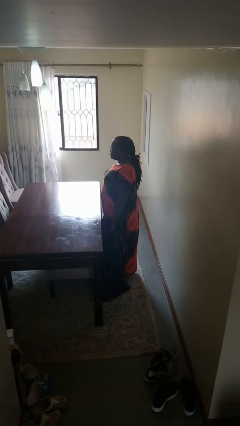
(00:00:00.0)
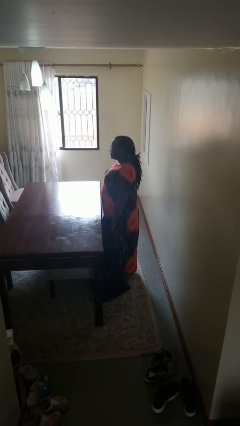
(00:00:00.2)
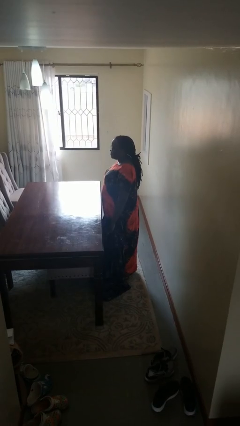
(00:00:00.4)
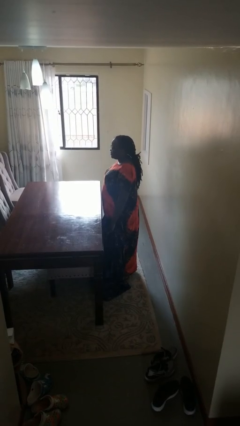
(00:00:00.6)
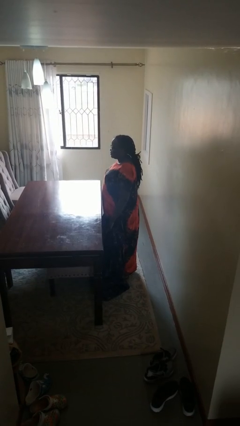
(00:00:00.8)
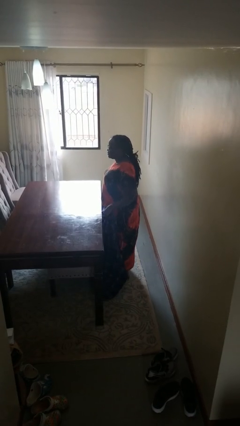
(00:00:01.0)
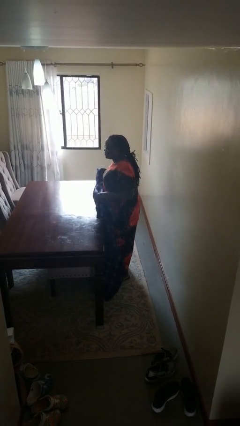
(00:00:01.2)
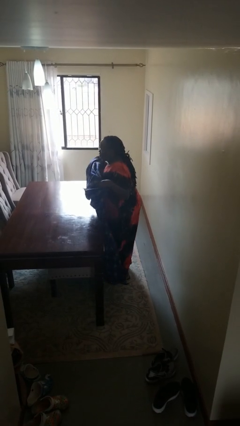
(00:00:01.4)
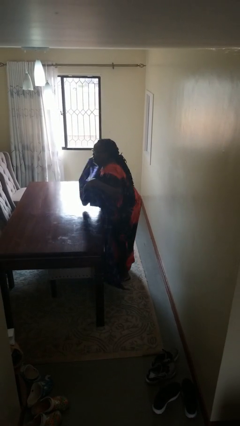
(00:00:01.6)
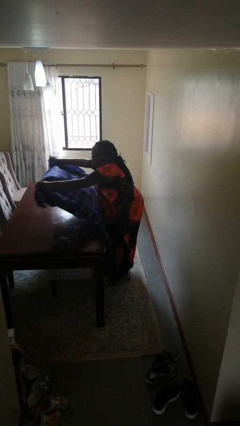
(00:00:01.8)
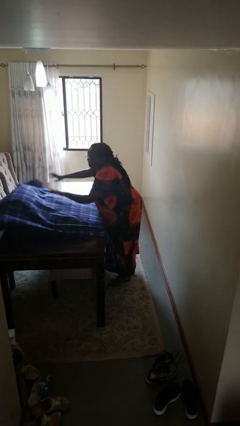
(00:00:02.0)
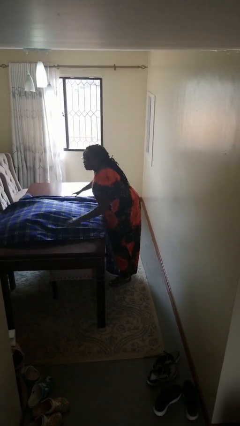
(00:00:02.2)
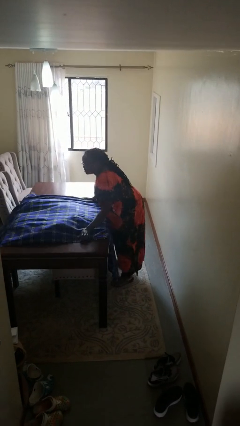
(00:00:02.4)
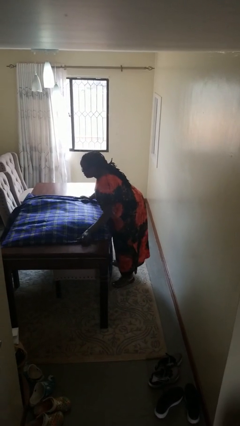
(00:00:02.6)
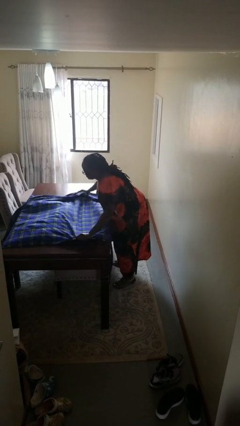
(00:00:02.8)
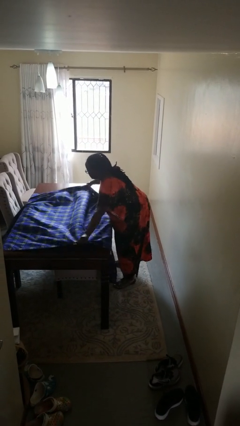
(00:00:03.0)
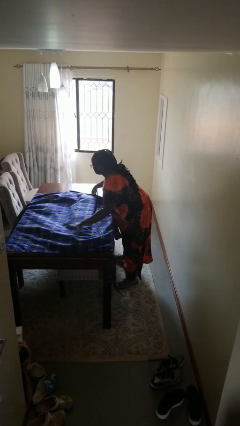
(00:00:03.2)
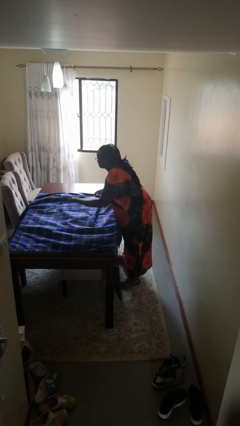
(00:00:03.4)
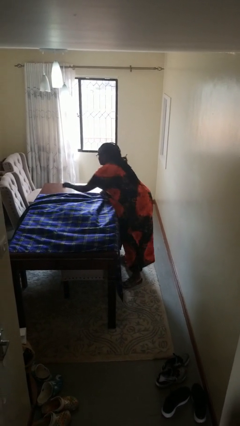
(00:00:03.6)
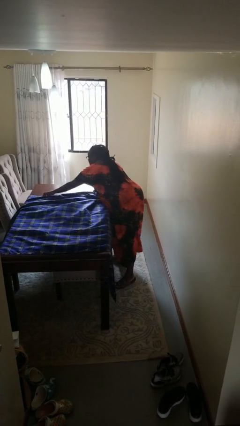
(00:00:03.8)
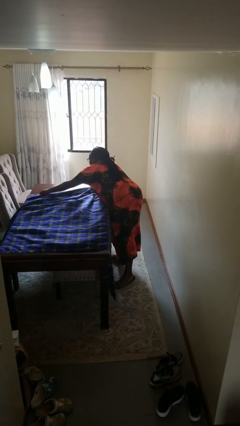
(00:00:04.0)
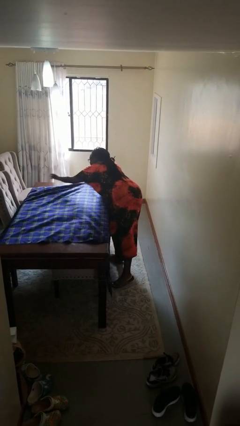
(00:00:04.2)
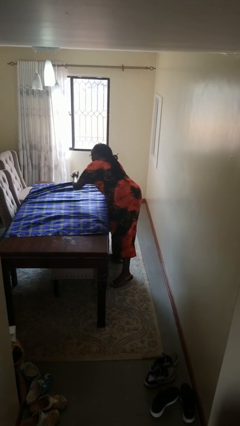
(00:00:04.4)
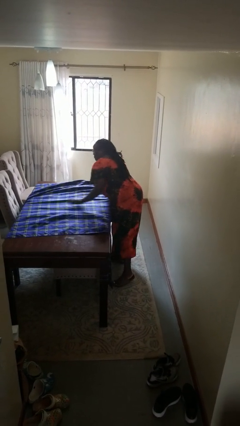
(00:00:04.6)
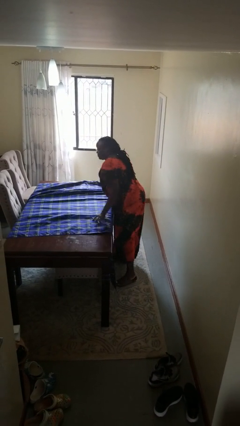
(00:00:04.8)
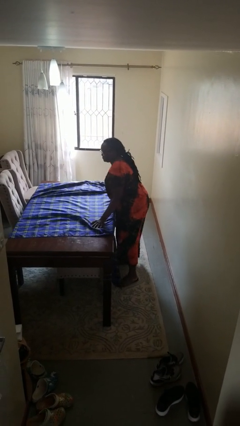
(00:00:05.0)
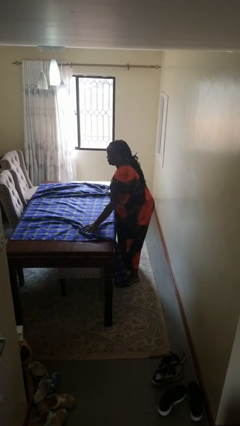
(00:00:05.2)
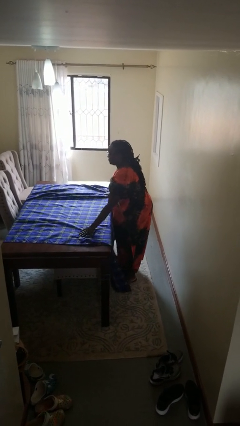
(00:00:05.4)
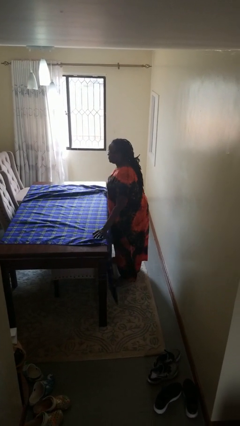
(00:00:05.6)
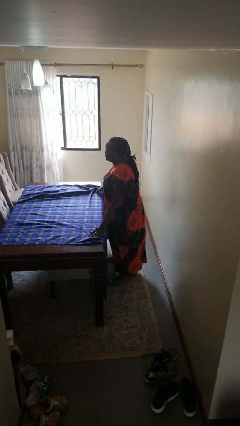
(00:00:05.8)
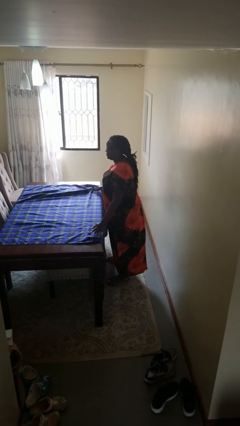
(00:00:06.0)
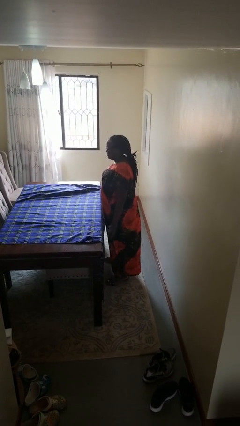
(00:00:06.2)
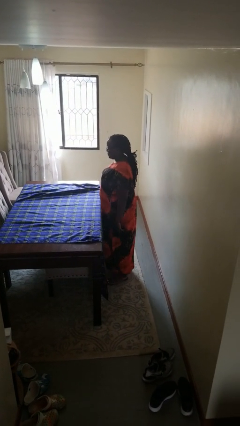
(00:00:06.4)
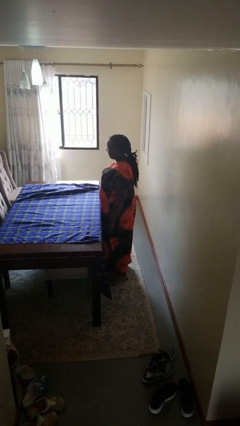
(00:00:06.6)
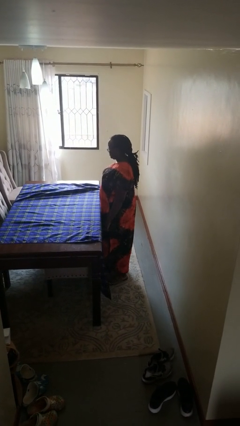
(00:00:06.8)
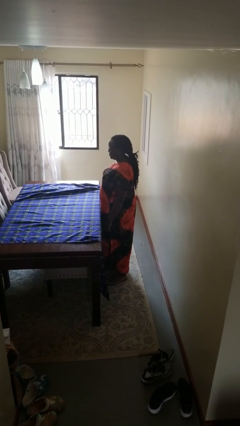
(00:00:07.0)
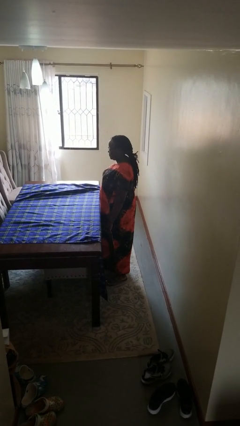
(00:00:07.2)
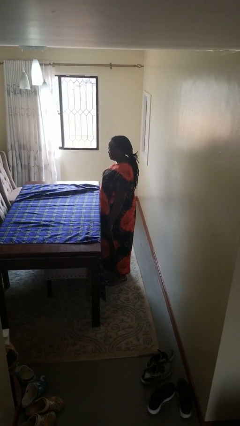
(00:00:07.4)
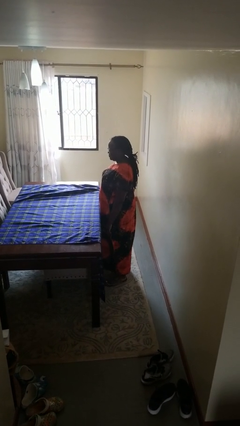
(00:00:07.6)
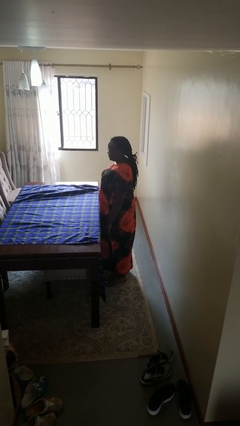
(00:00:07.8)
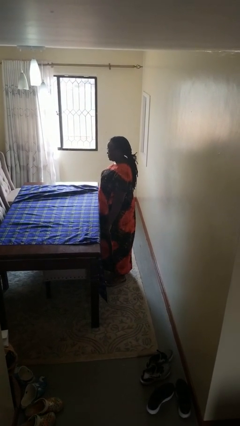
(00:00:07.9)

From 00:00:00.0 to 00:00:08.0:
person spreads tablecloth

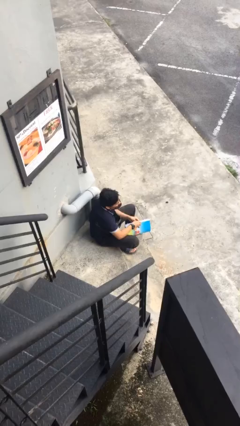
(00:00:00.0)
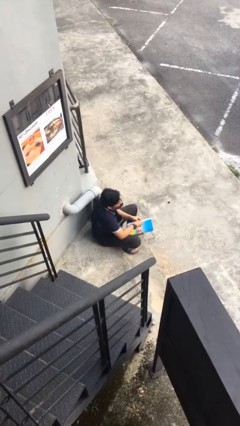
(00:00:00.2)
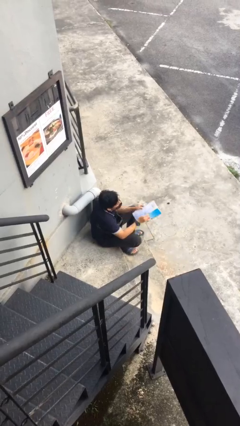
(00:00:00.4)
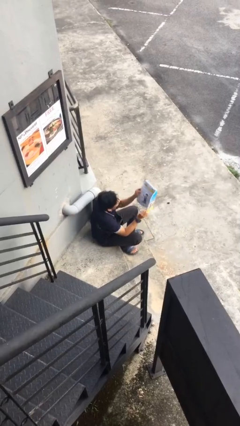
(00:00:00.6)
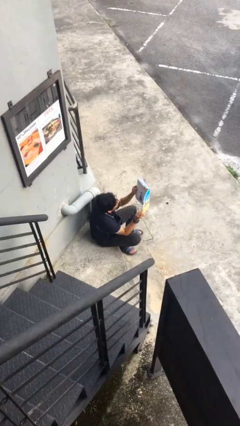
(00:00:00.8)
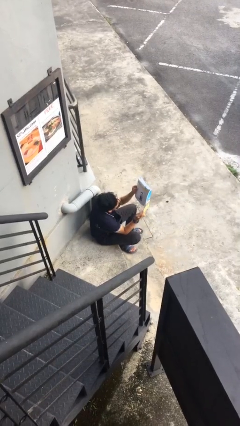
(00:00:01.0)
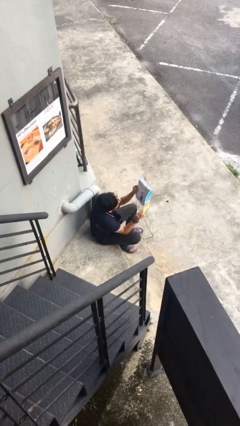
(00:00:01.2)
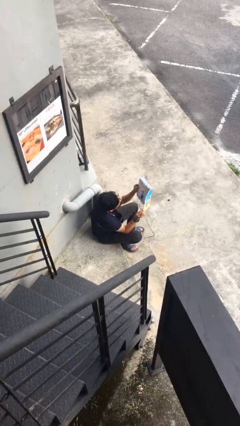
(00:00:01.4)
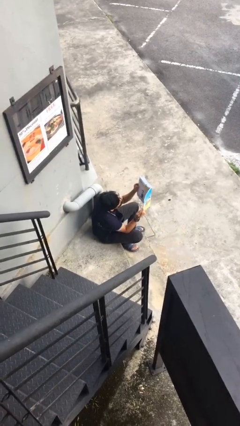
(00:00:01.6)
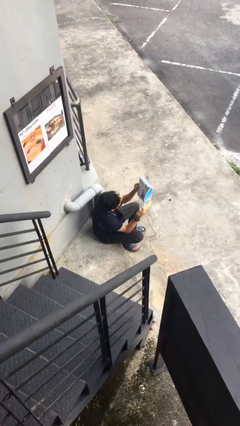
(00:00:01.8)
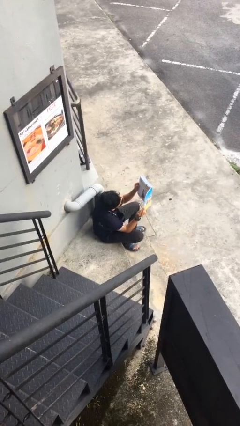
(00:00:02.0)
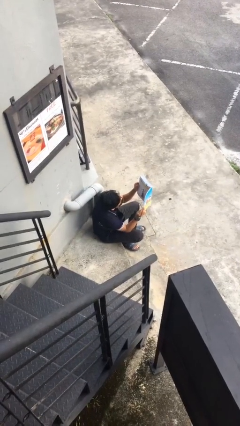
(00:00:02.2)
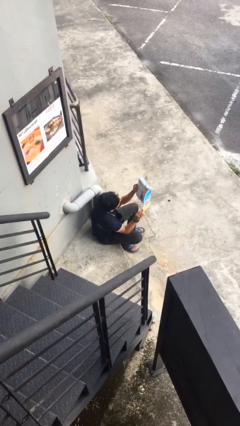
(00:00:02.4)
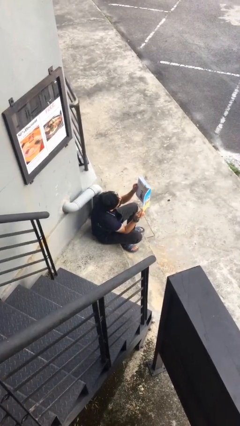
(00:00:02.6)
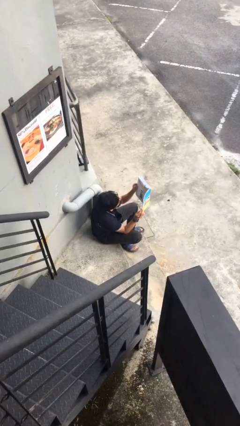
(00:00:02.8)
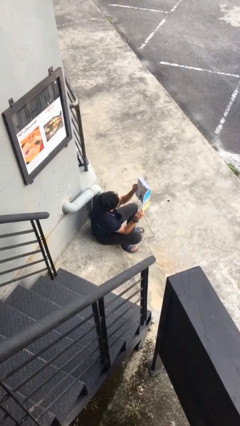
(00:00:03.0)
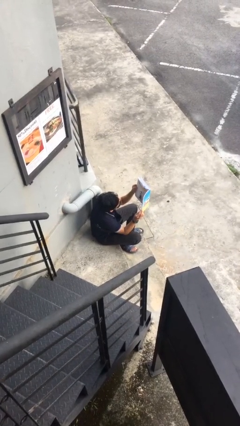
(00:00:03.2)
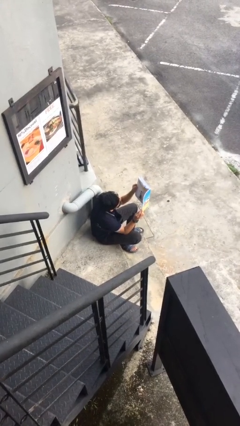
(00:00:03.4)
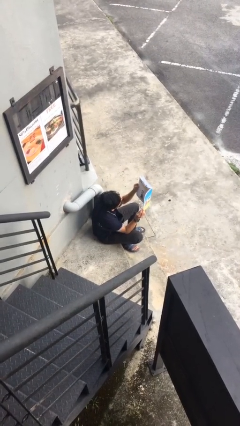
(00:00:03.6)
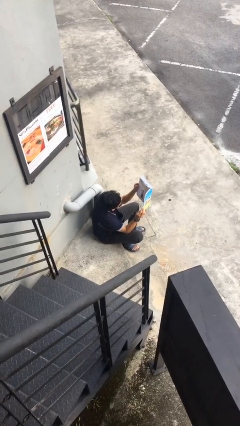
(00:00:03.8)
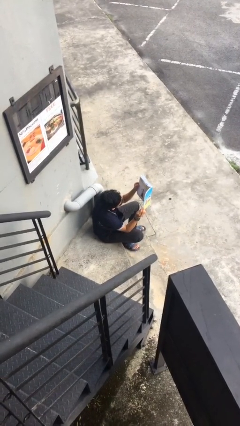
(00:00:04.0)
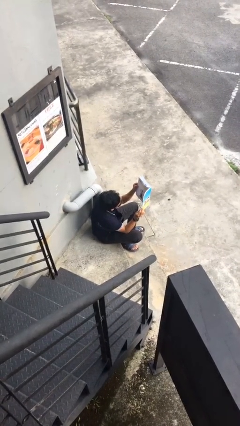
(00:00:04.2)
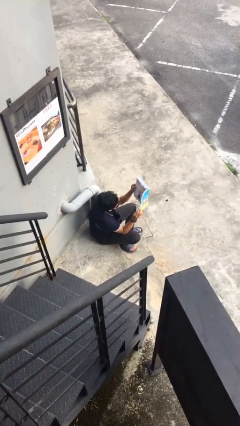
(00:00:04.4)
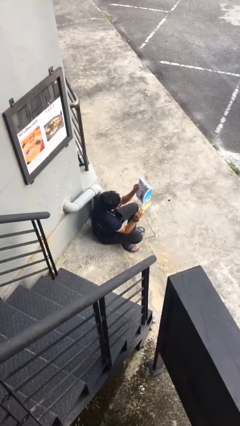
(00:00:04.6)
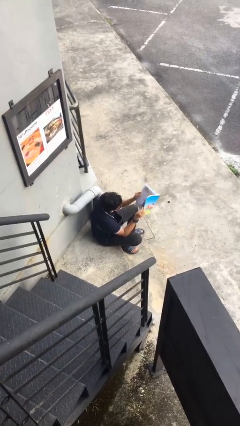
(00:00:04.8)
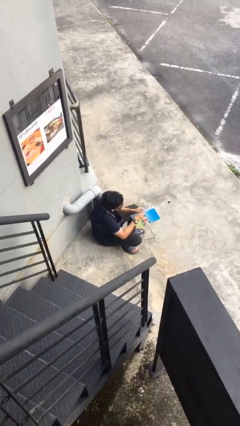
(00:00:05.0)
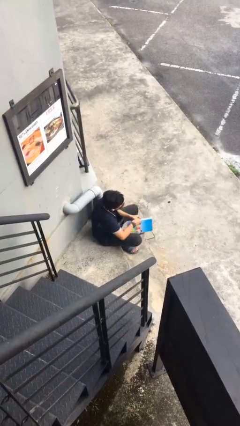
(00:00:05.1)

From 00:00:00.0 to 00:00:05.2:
person reads document

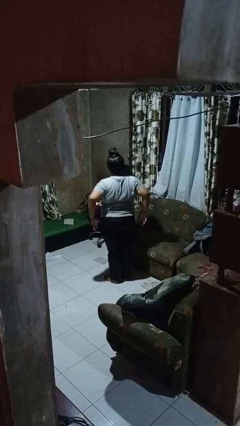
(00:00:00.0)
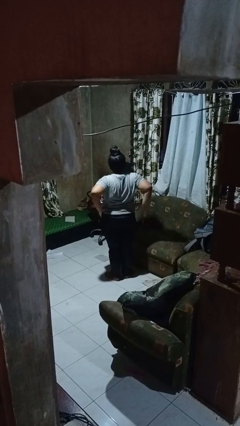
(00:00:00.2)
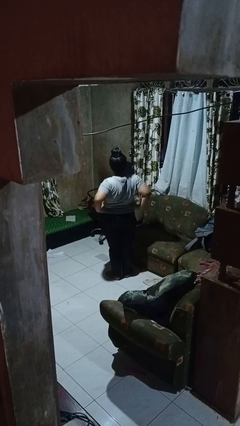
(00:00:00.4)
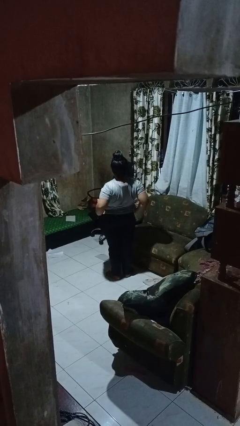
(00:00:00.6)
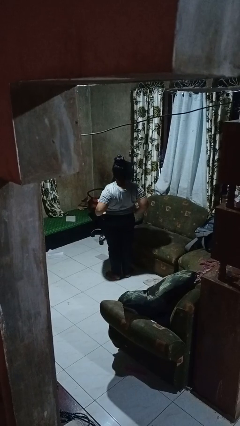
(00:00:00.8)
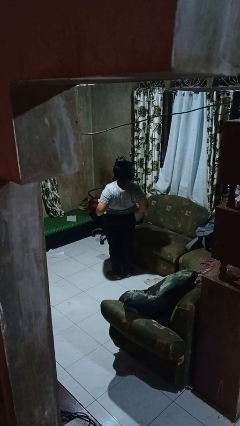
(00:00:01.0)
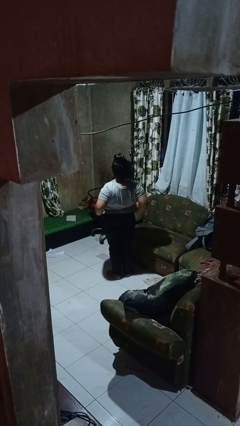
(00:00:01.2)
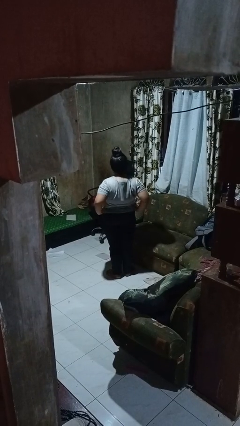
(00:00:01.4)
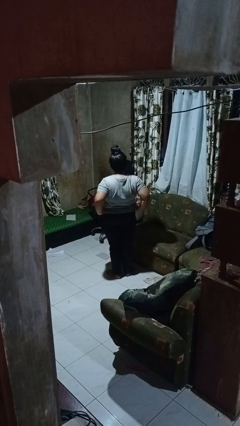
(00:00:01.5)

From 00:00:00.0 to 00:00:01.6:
person stretches back

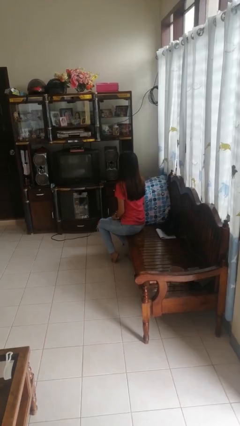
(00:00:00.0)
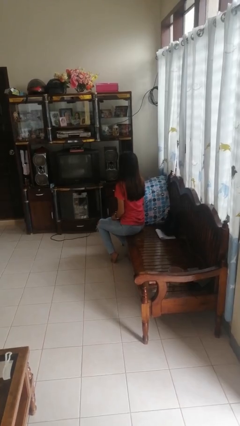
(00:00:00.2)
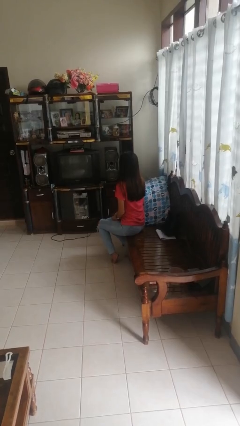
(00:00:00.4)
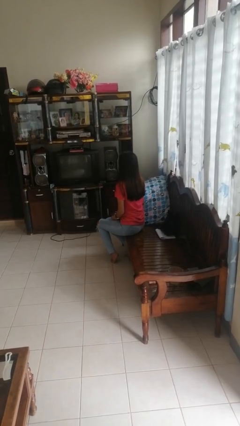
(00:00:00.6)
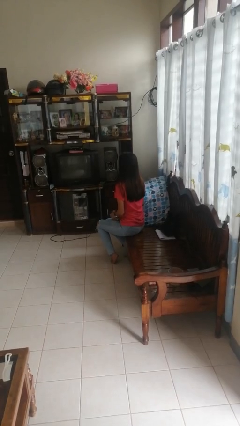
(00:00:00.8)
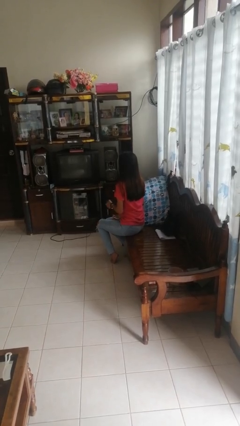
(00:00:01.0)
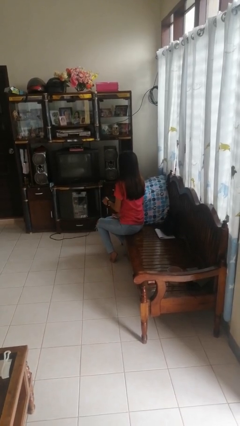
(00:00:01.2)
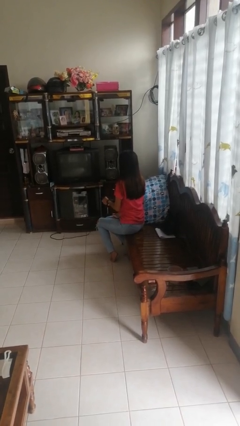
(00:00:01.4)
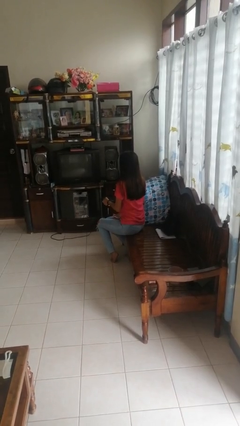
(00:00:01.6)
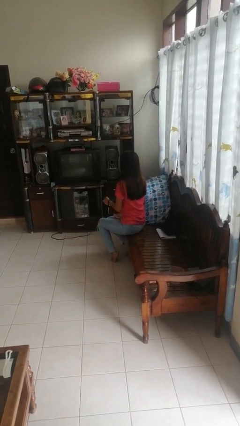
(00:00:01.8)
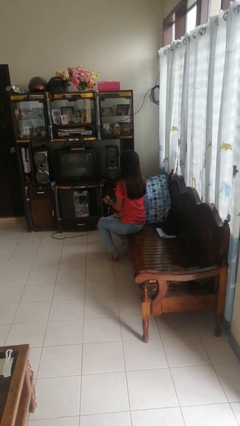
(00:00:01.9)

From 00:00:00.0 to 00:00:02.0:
person uses television remote

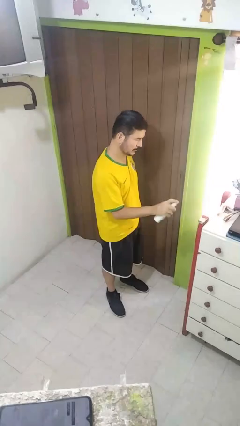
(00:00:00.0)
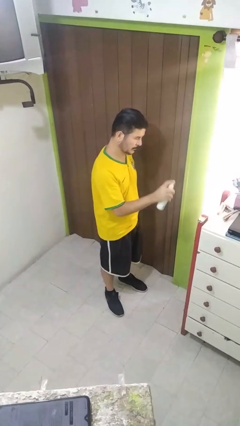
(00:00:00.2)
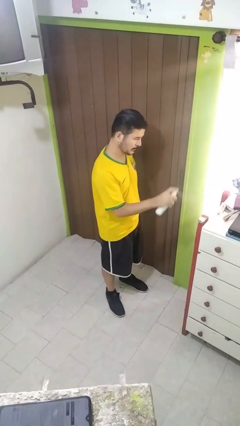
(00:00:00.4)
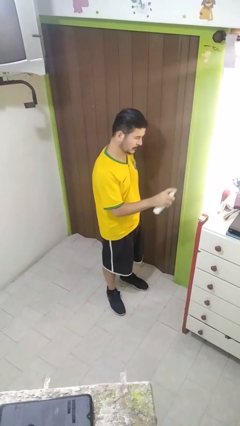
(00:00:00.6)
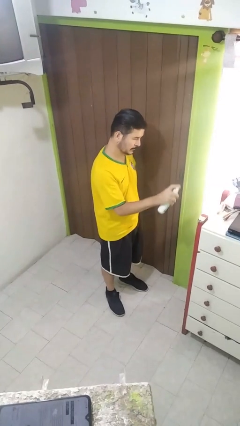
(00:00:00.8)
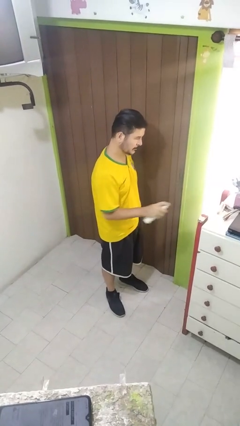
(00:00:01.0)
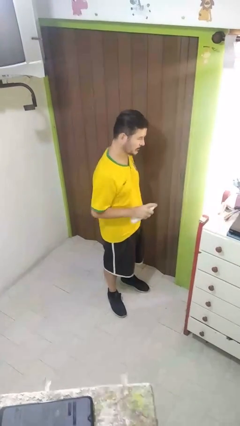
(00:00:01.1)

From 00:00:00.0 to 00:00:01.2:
person sprays from bottle
